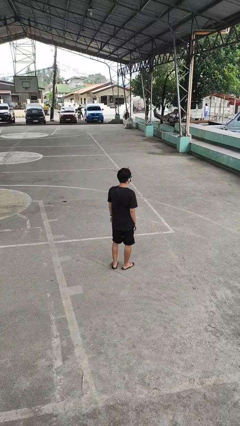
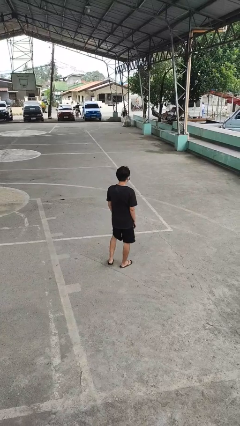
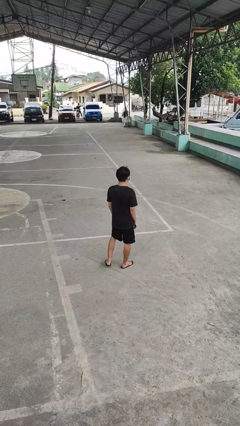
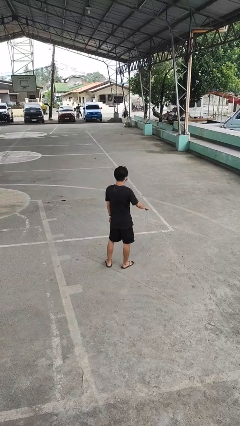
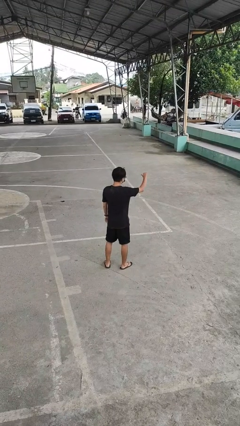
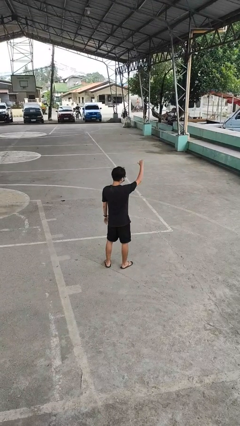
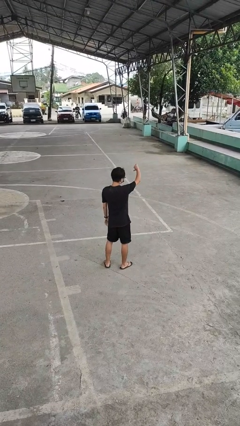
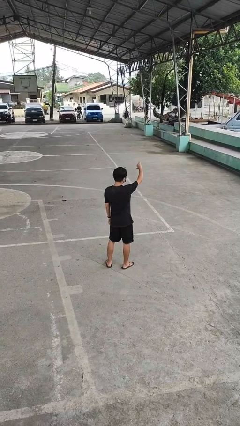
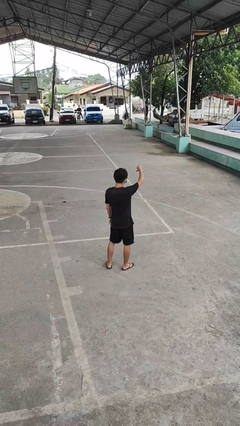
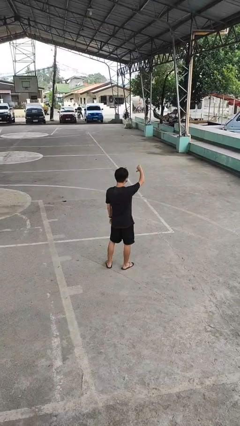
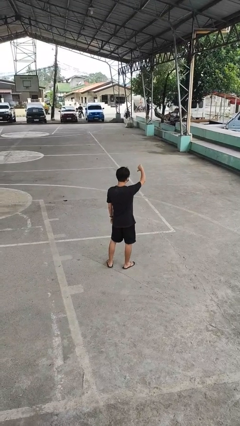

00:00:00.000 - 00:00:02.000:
person gestures thumbs down

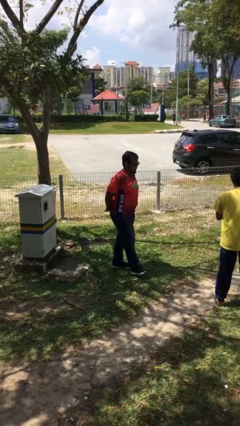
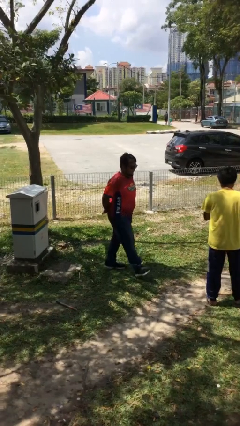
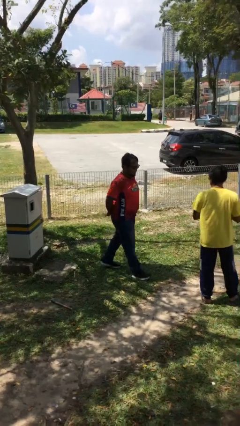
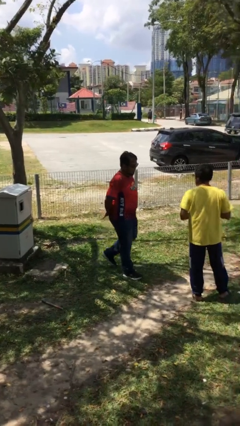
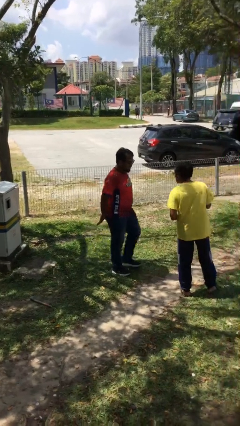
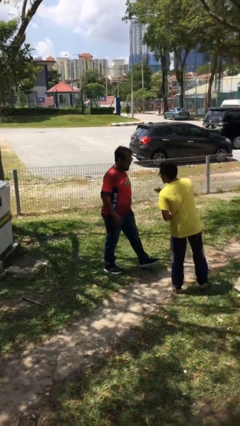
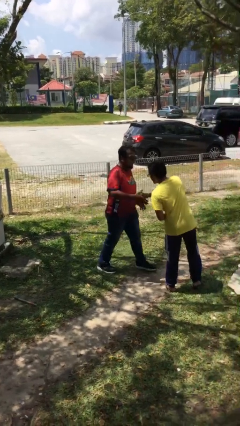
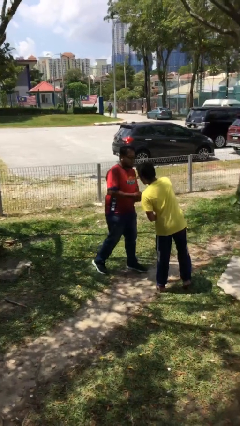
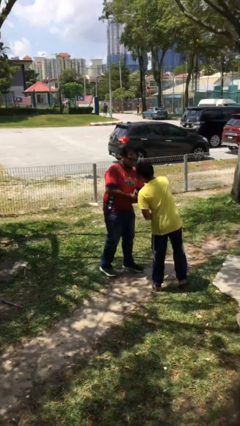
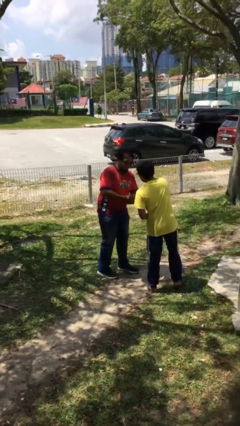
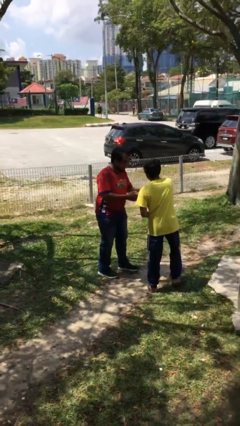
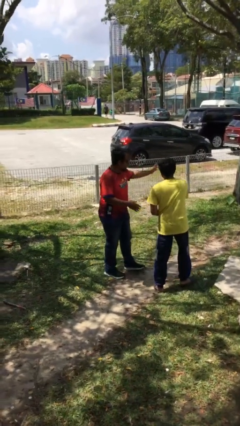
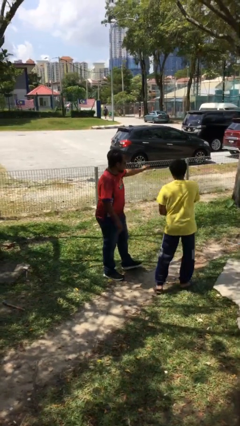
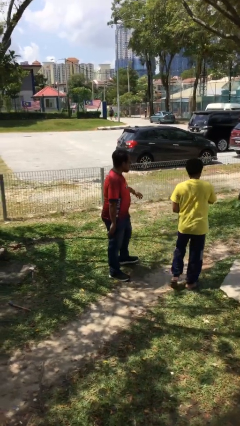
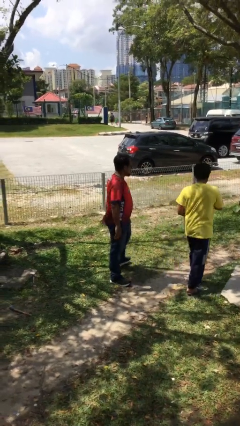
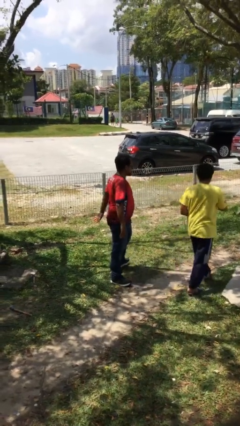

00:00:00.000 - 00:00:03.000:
person shakes hand

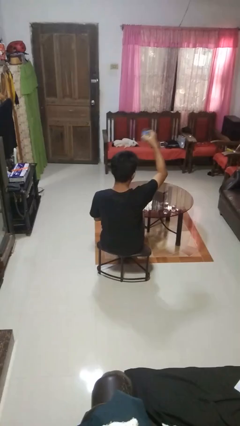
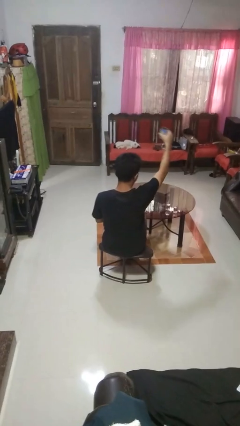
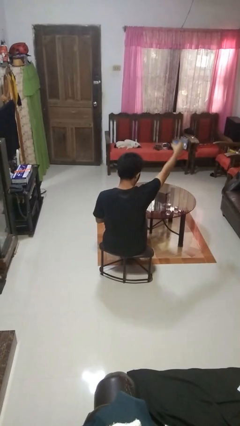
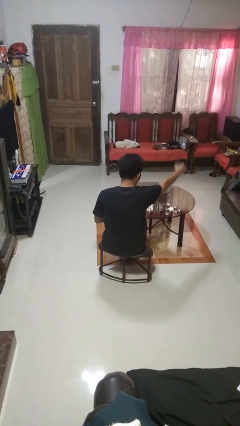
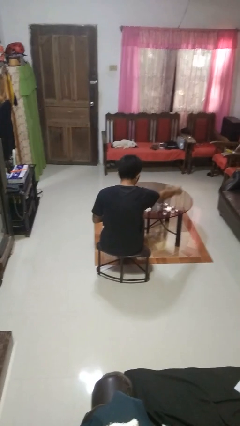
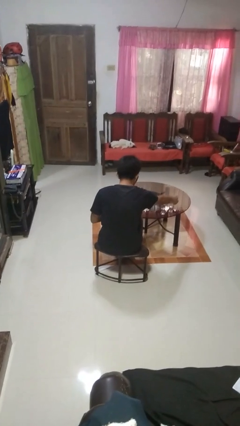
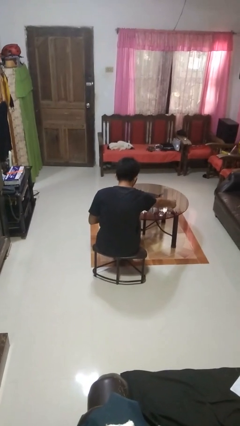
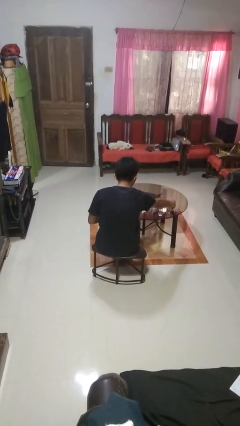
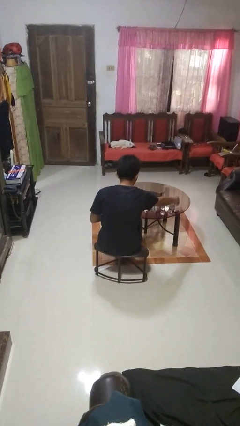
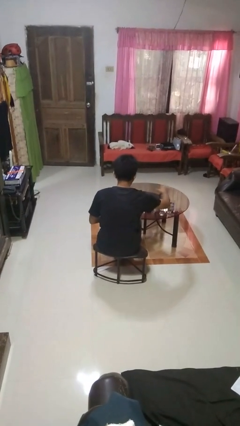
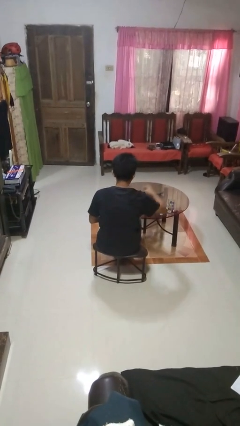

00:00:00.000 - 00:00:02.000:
person puts down object on table

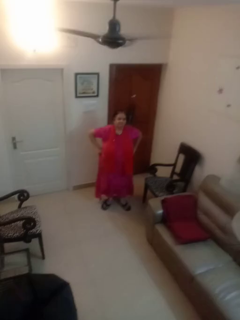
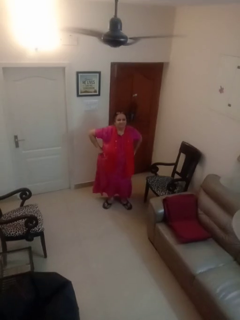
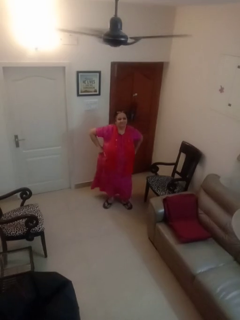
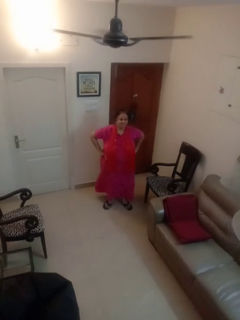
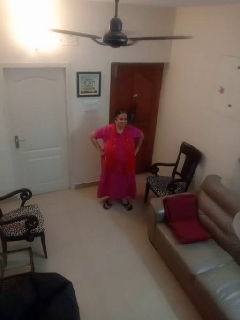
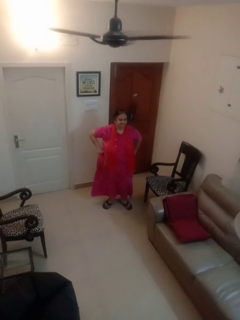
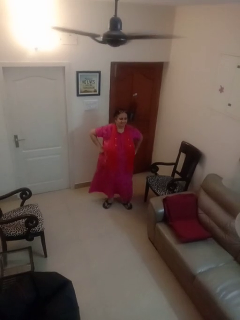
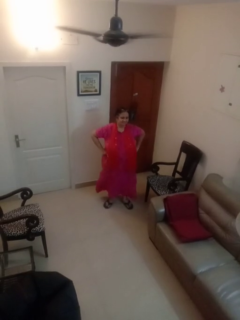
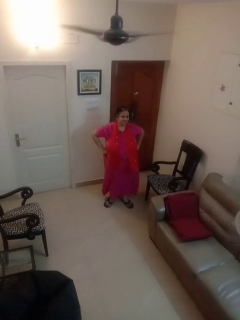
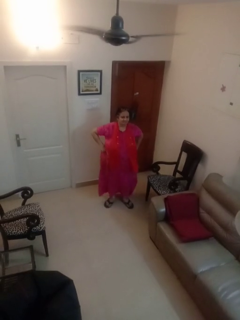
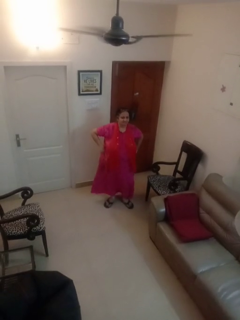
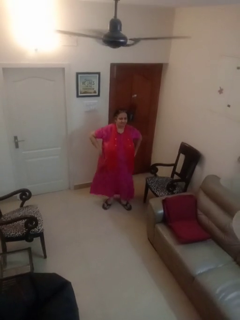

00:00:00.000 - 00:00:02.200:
person wiggles hips

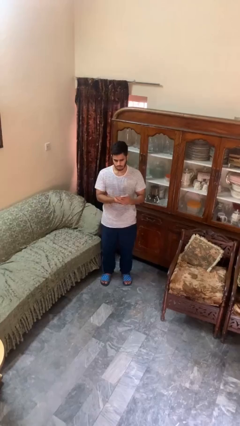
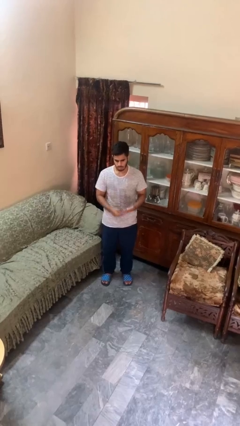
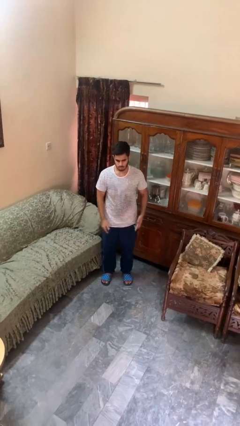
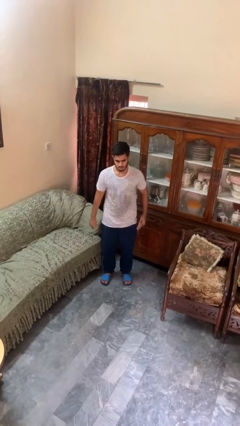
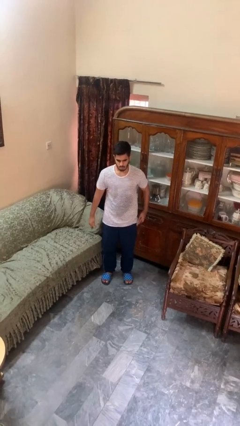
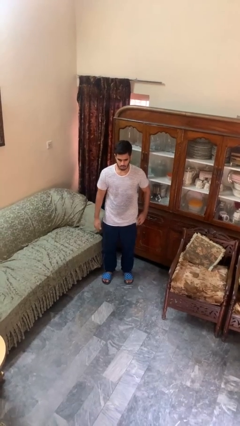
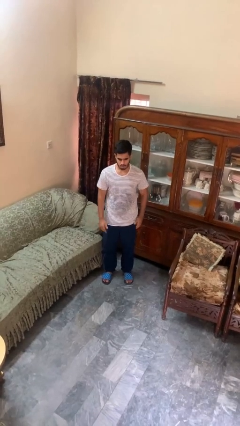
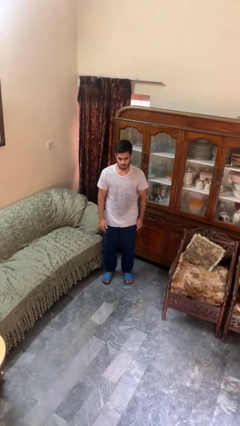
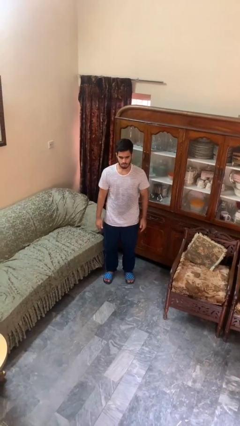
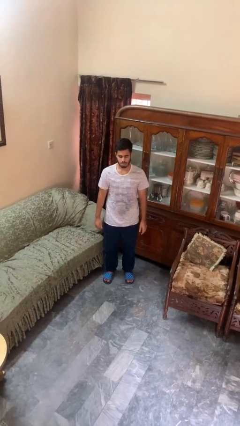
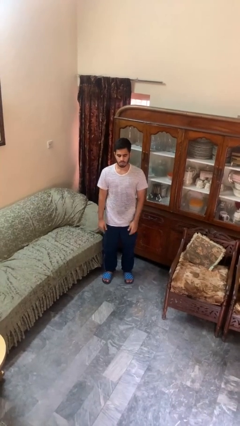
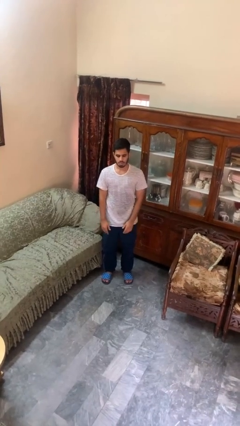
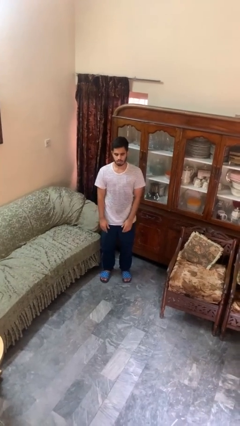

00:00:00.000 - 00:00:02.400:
person puts phone into pocket

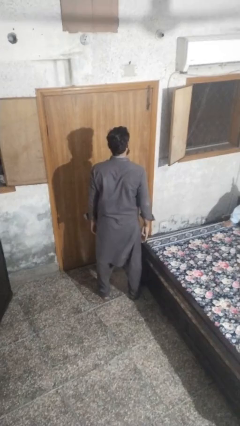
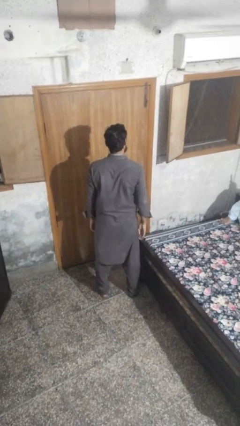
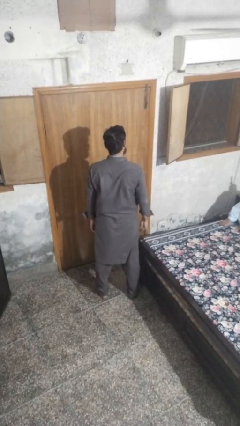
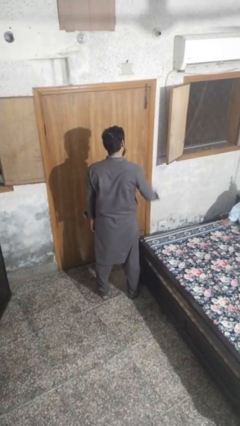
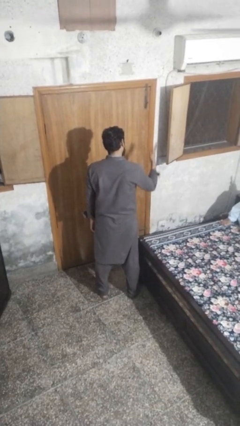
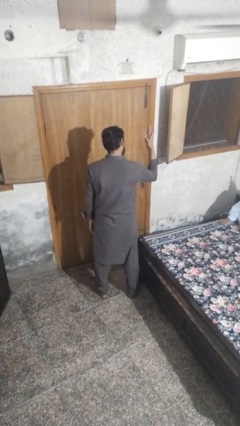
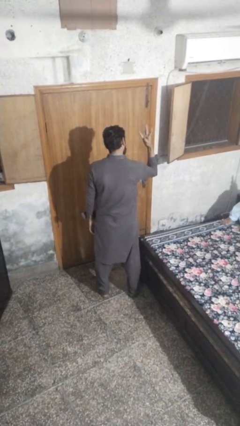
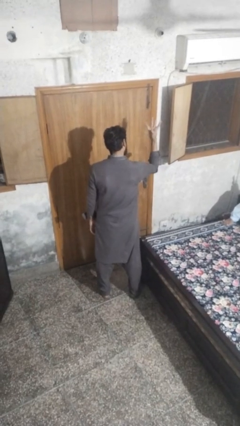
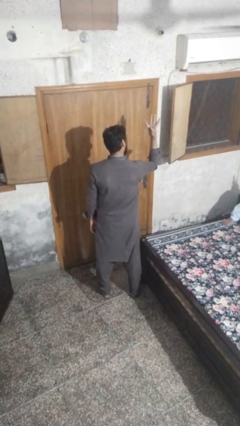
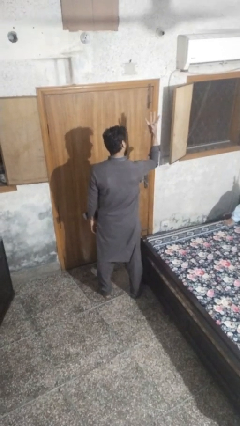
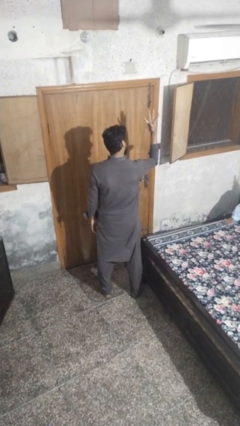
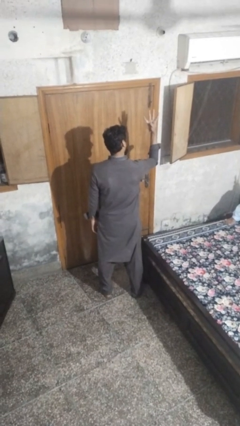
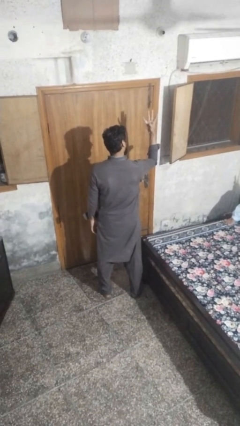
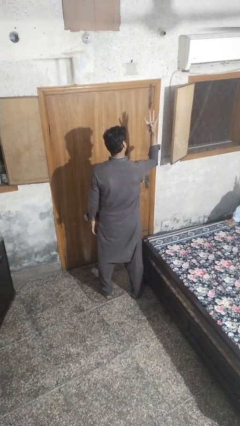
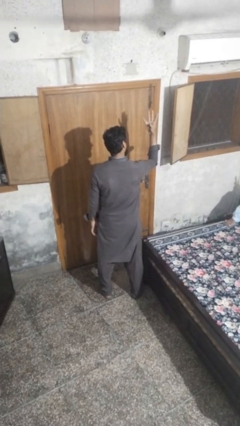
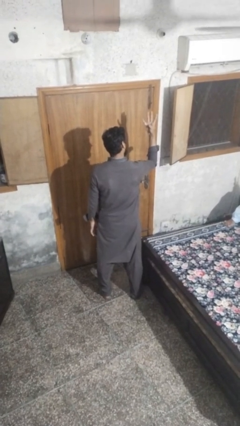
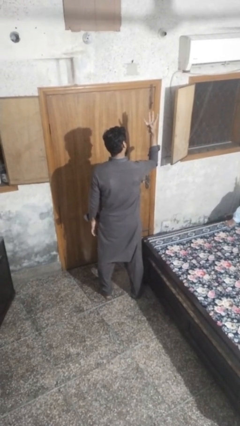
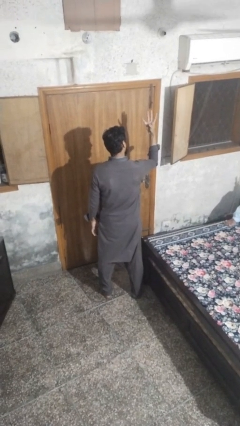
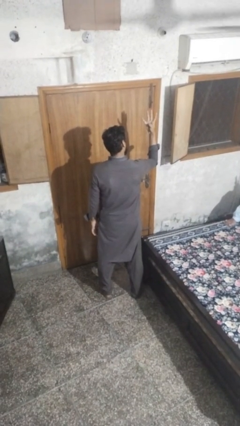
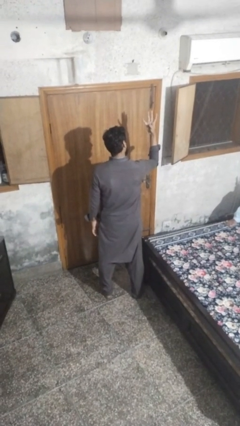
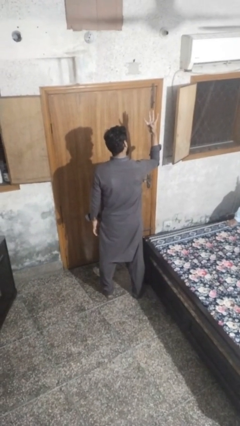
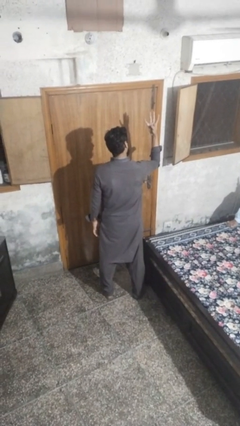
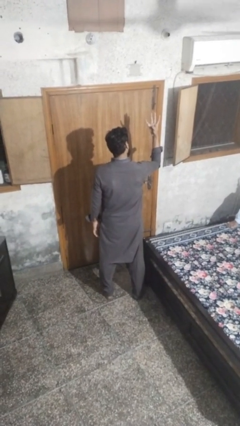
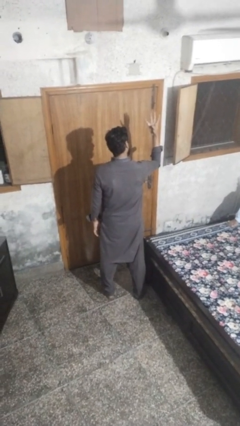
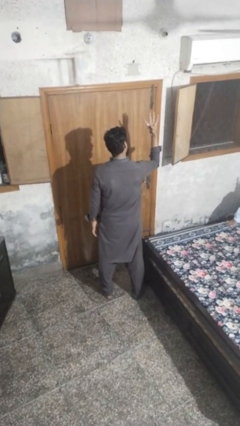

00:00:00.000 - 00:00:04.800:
person gestures number four

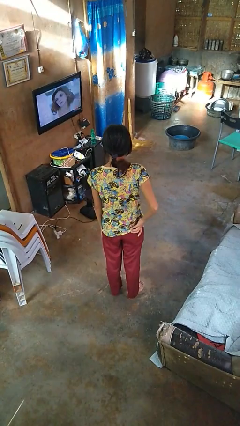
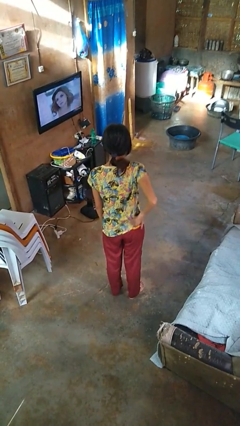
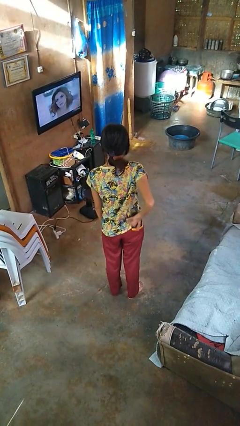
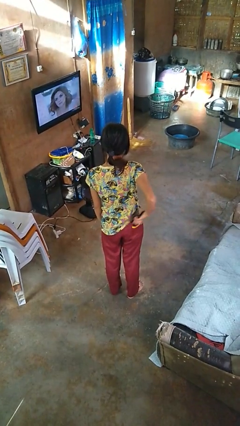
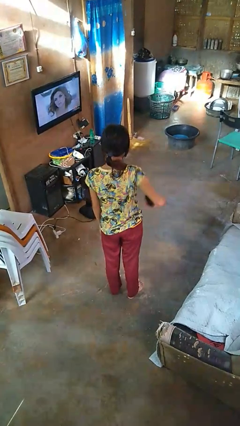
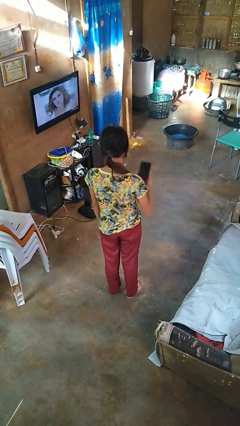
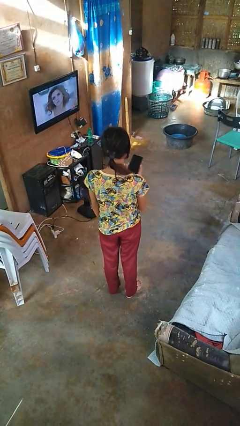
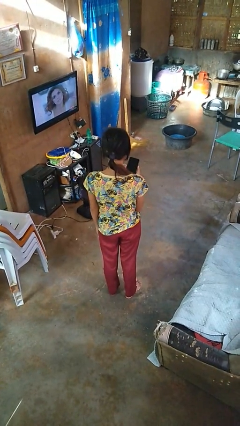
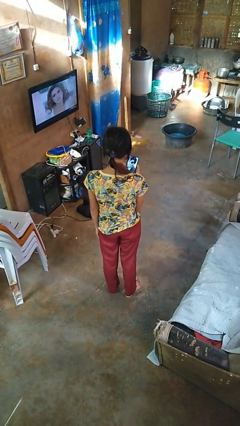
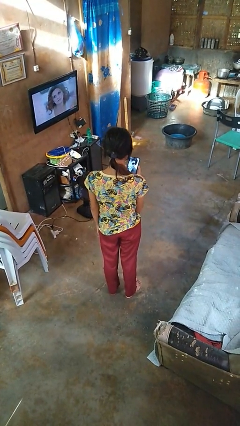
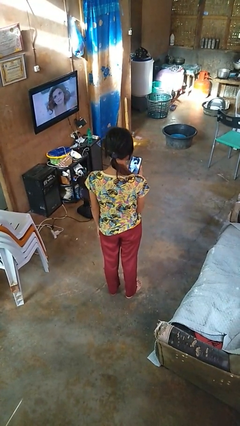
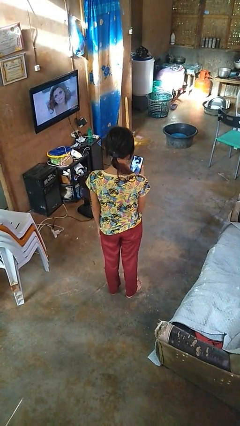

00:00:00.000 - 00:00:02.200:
person takes phone from pocket
